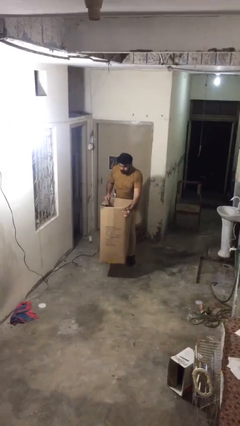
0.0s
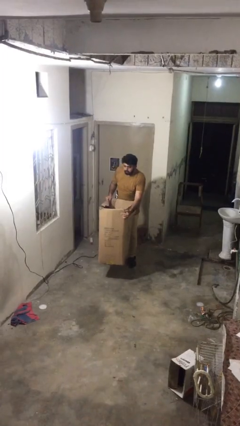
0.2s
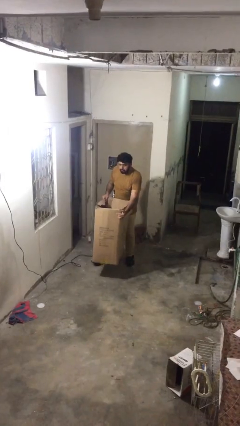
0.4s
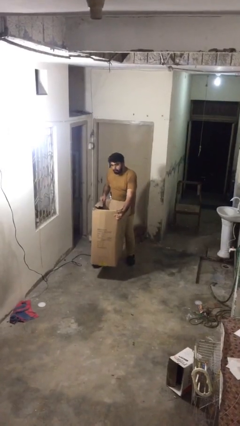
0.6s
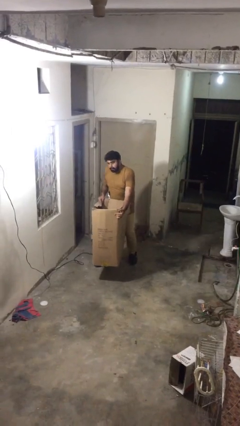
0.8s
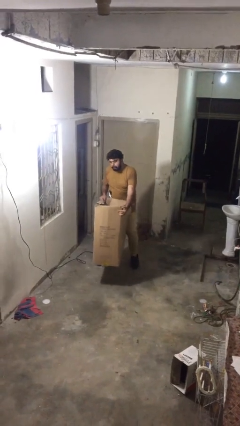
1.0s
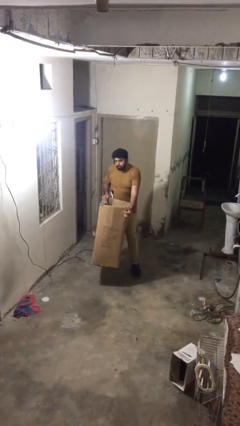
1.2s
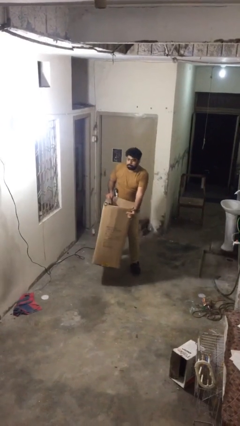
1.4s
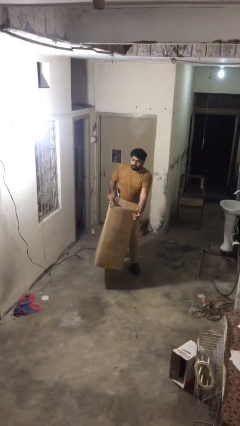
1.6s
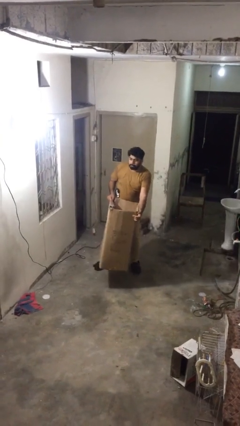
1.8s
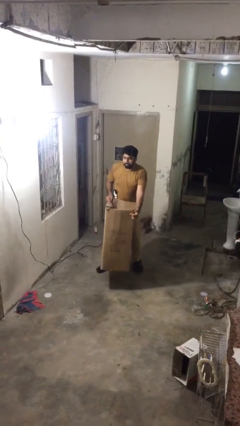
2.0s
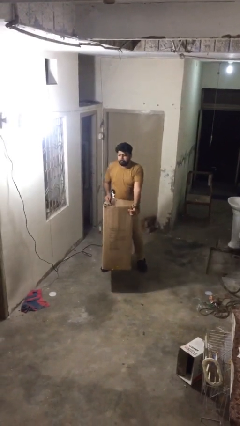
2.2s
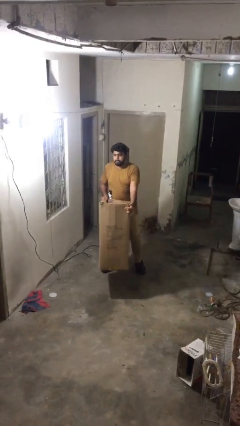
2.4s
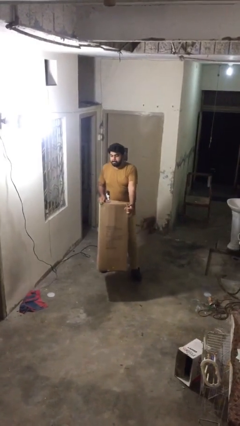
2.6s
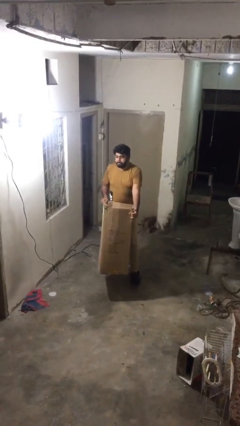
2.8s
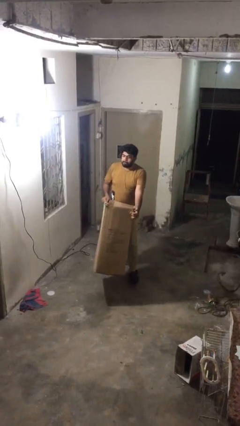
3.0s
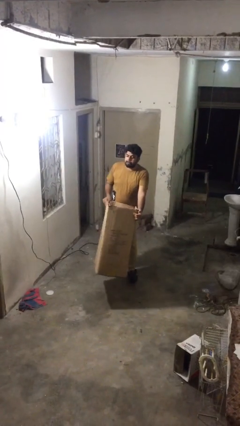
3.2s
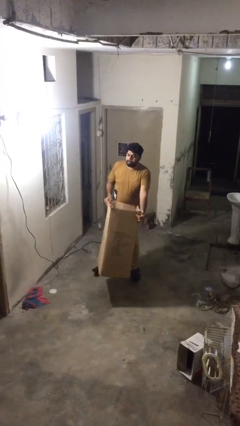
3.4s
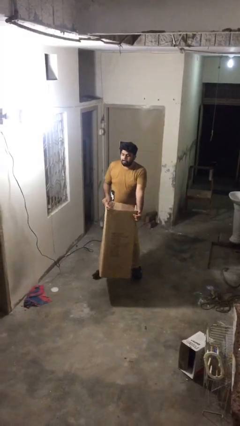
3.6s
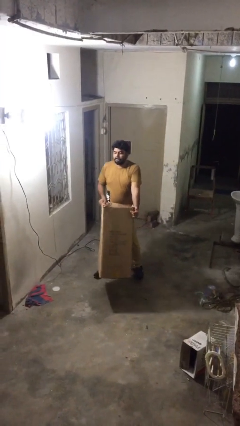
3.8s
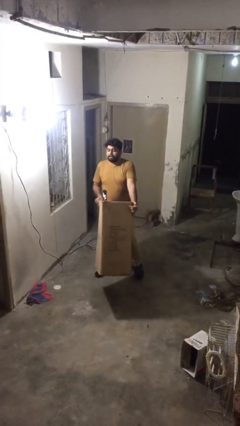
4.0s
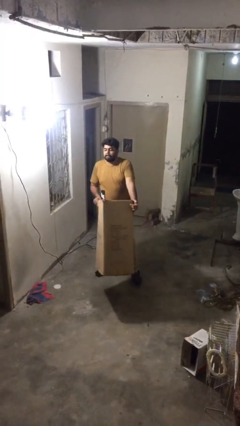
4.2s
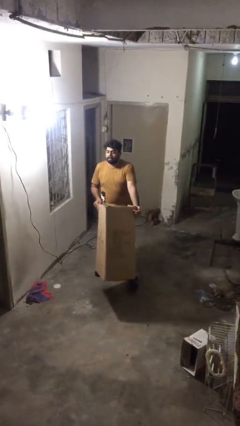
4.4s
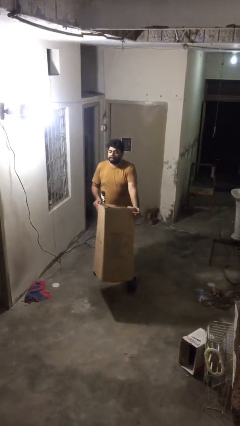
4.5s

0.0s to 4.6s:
person carries heavy object

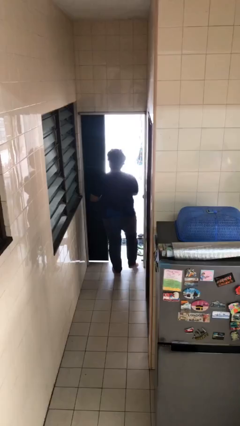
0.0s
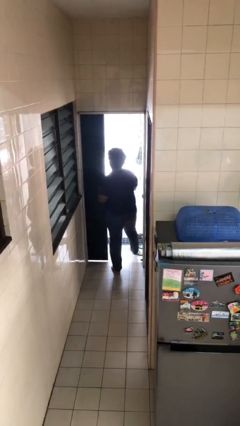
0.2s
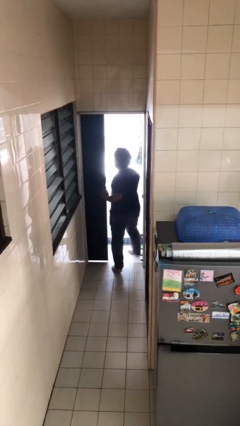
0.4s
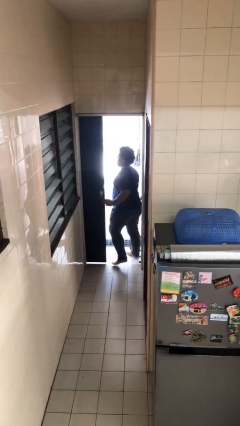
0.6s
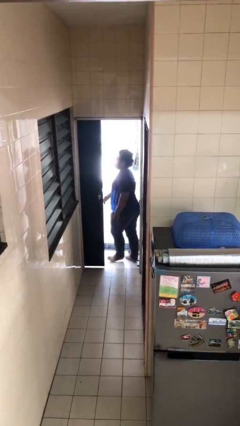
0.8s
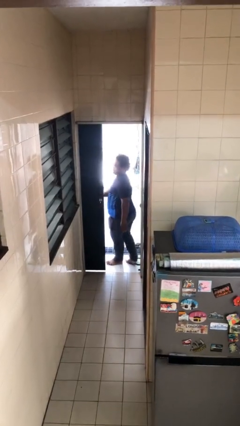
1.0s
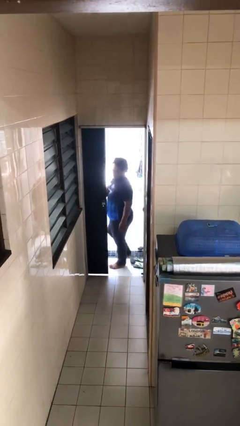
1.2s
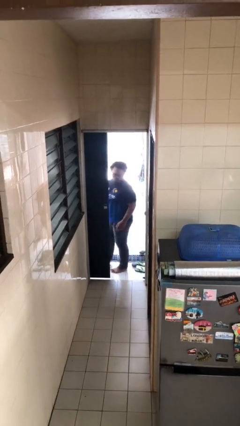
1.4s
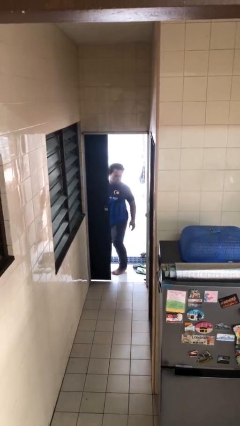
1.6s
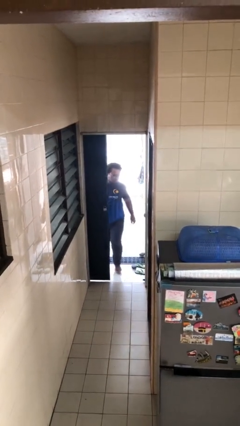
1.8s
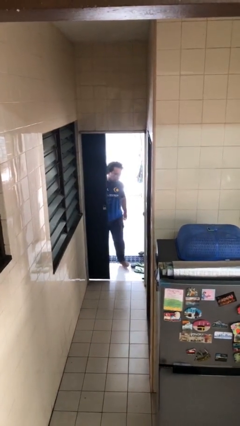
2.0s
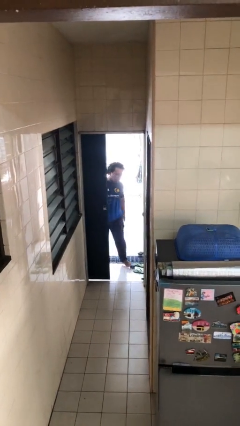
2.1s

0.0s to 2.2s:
person exits scene through structure

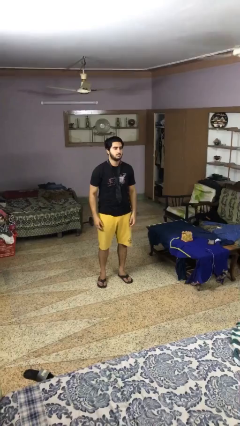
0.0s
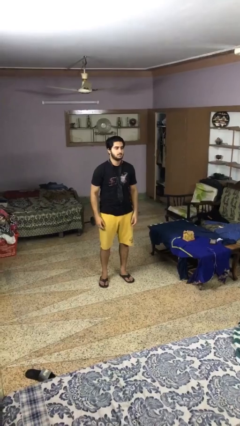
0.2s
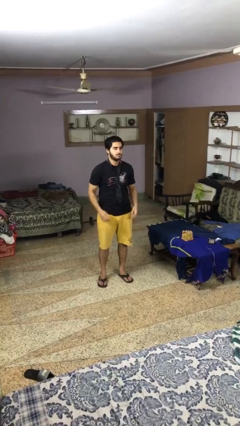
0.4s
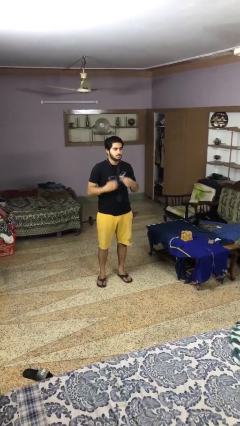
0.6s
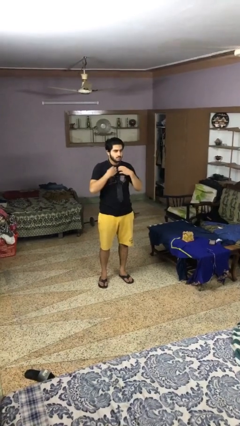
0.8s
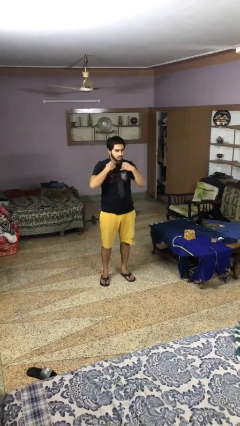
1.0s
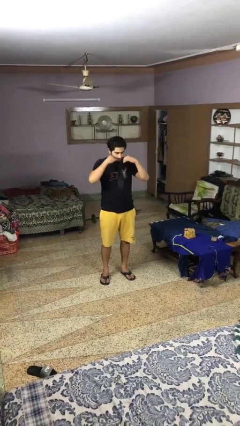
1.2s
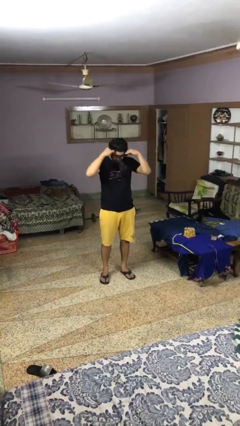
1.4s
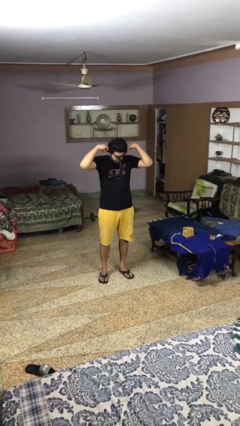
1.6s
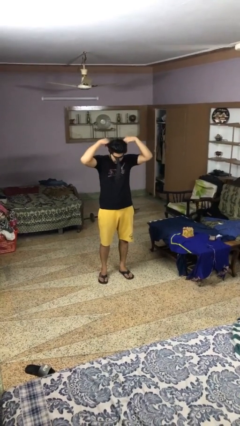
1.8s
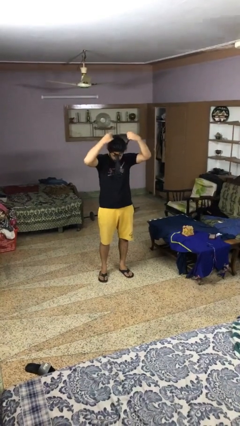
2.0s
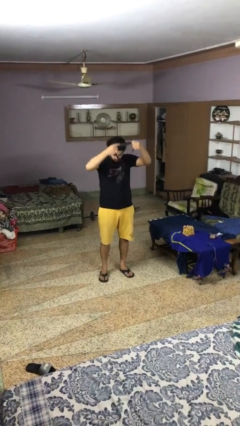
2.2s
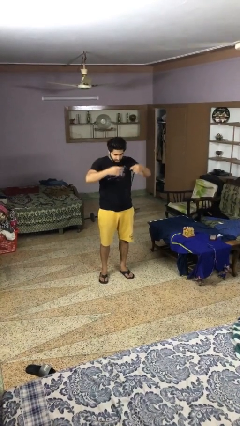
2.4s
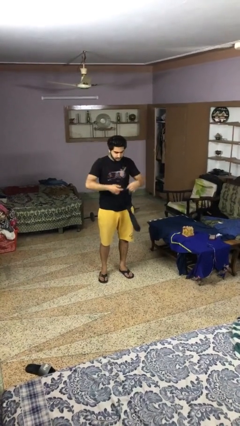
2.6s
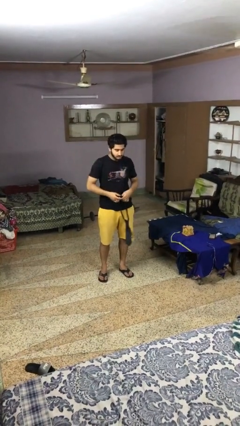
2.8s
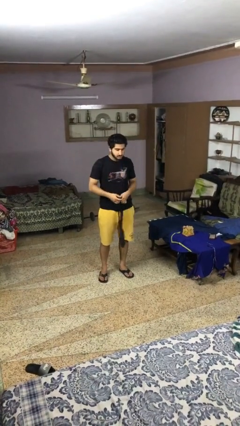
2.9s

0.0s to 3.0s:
person takes off necktie

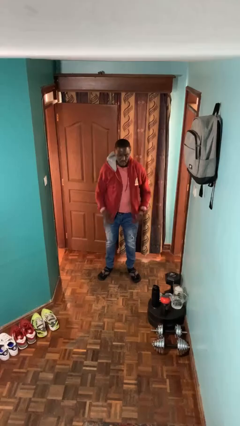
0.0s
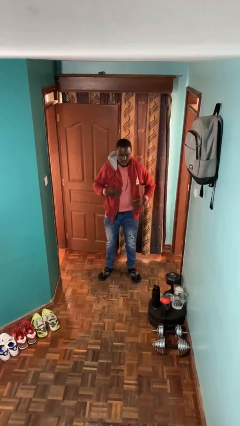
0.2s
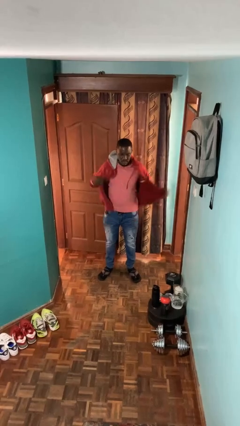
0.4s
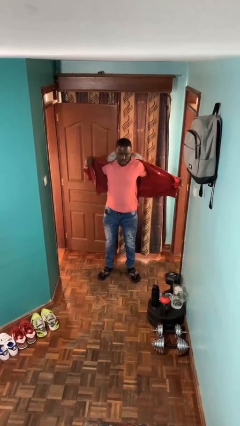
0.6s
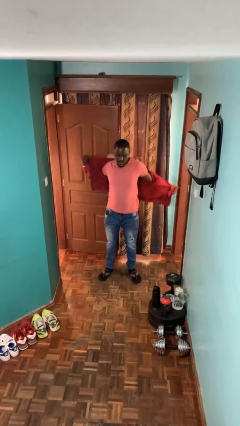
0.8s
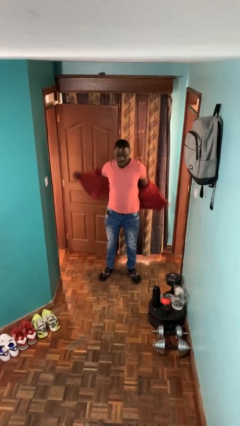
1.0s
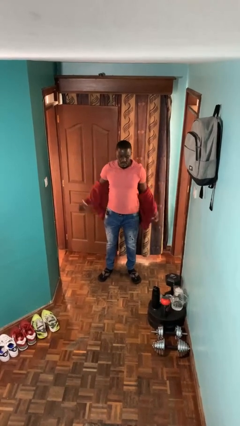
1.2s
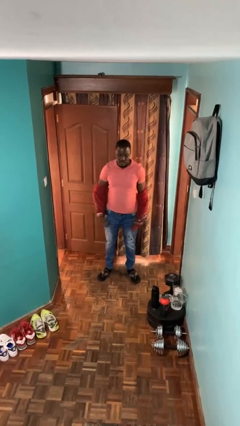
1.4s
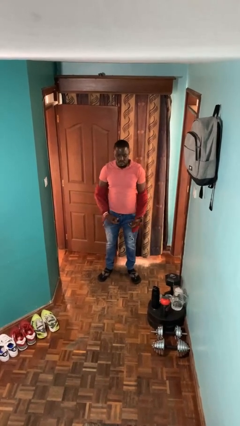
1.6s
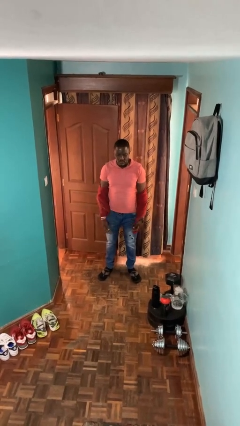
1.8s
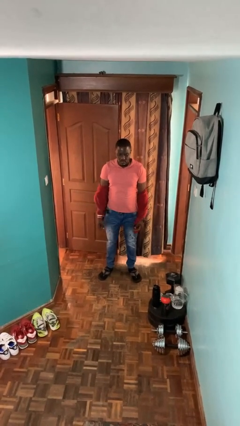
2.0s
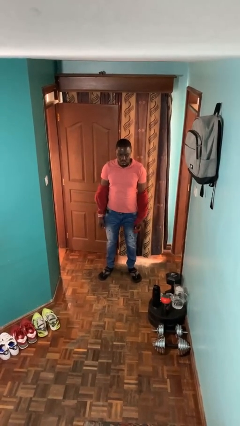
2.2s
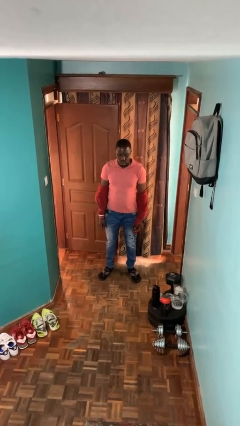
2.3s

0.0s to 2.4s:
person takes off jacket

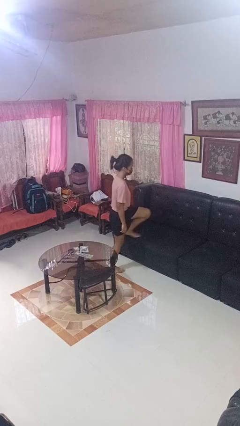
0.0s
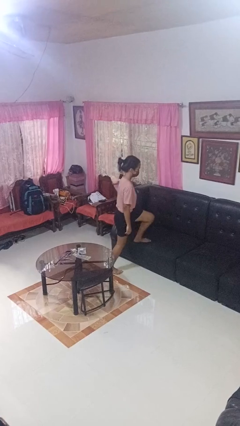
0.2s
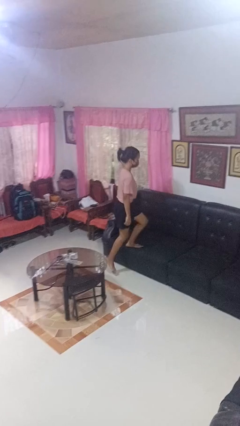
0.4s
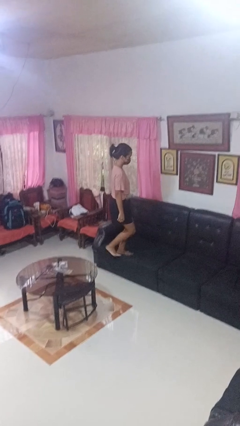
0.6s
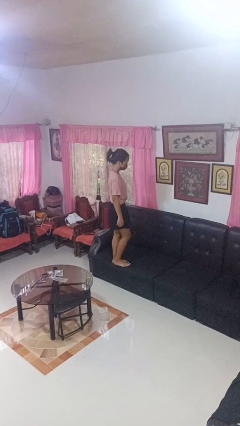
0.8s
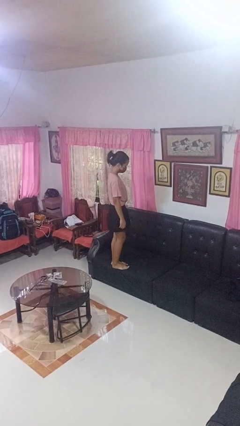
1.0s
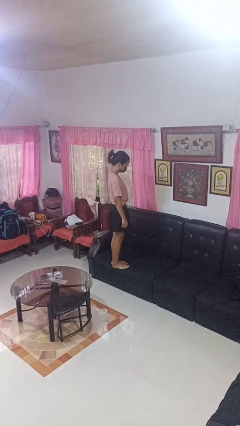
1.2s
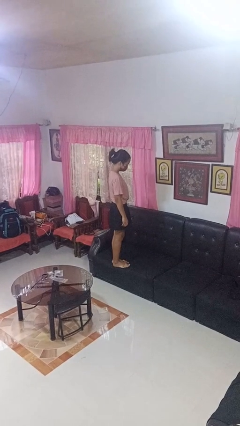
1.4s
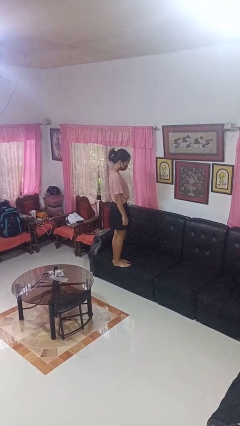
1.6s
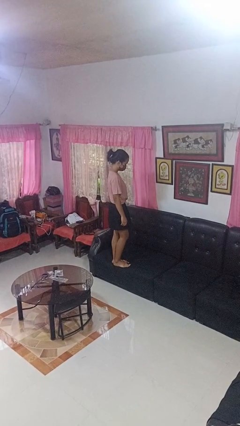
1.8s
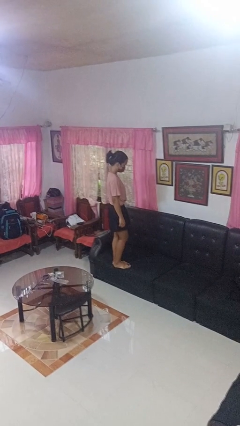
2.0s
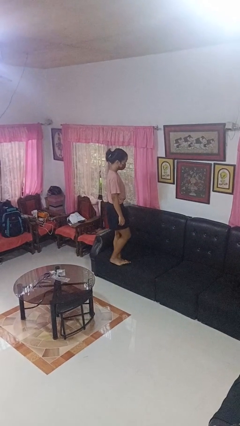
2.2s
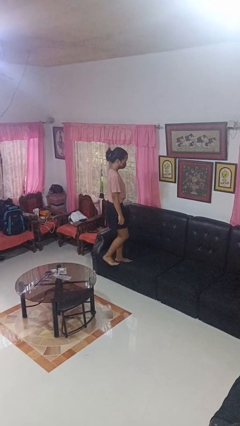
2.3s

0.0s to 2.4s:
person climbs on couch

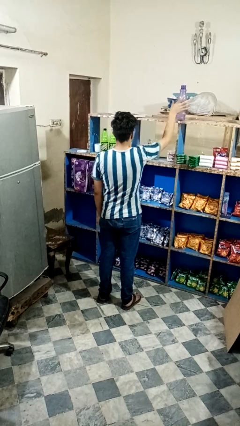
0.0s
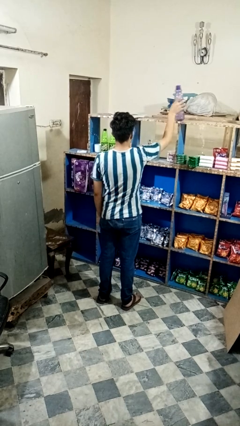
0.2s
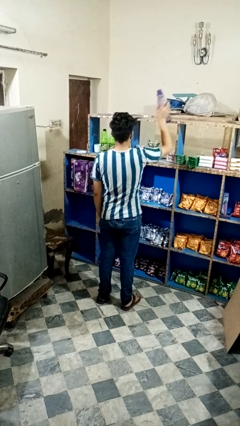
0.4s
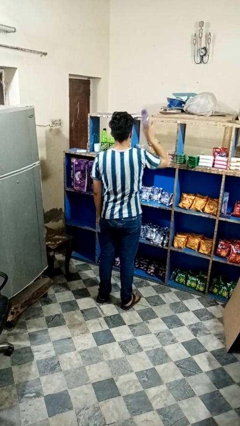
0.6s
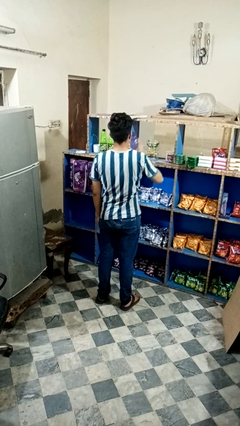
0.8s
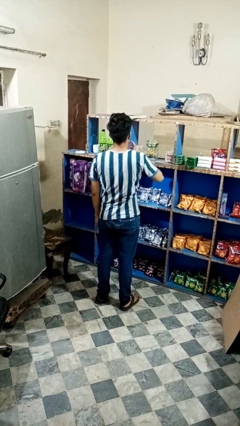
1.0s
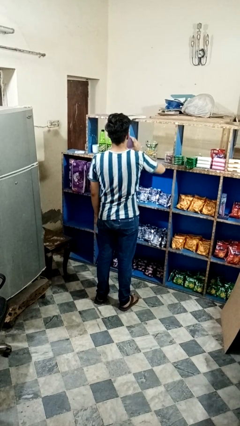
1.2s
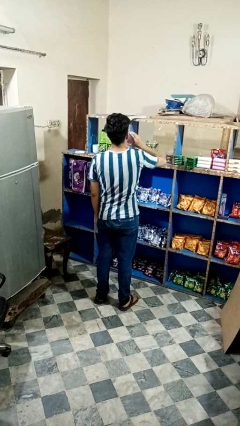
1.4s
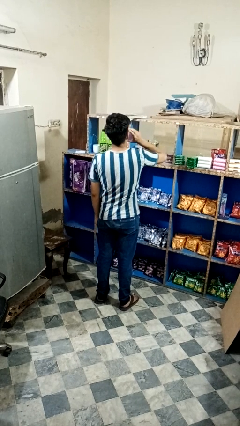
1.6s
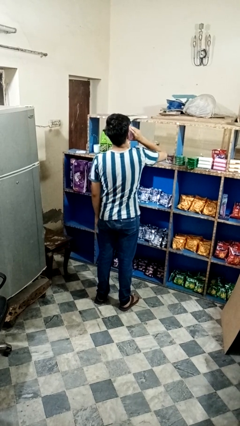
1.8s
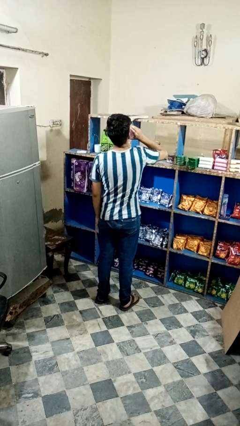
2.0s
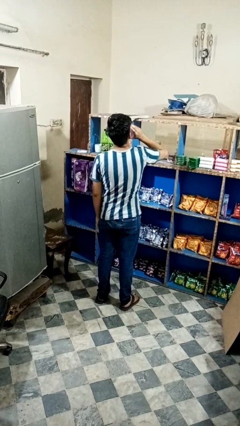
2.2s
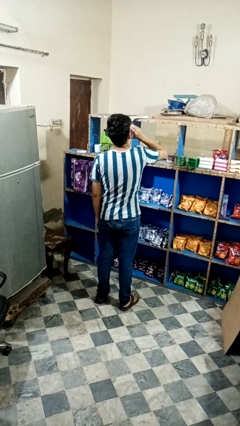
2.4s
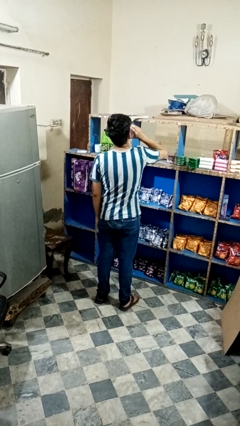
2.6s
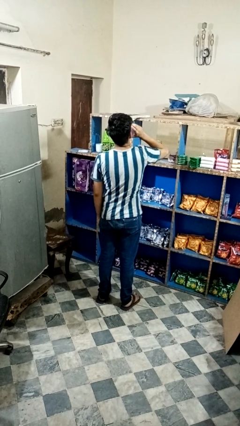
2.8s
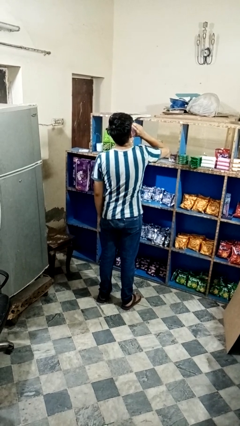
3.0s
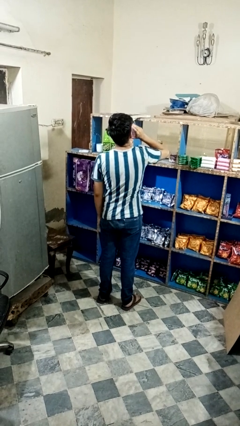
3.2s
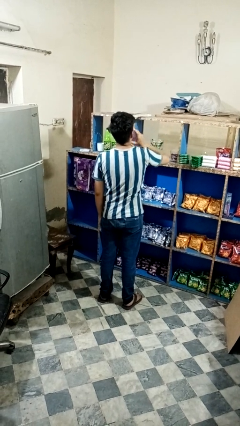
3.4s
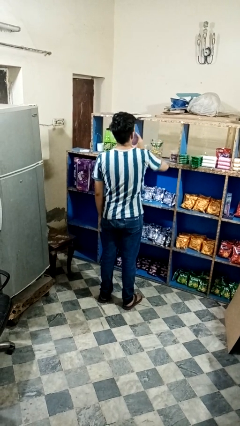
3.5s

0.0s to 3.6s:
person drinks from bottle
